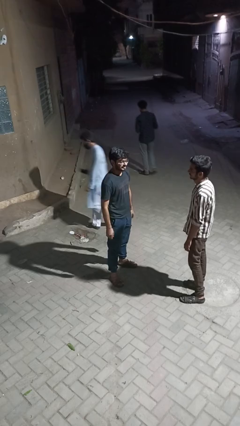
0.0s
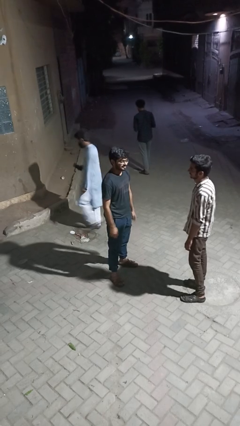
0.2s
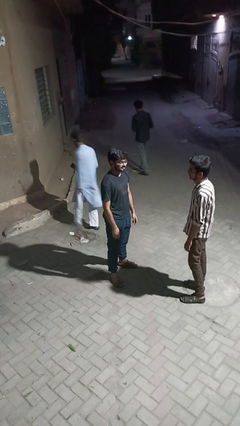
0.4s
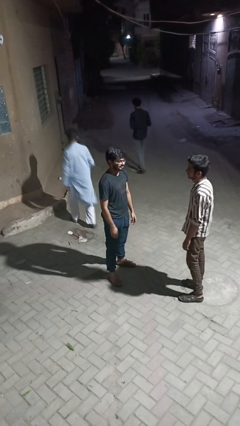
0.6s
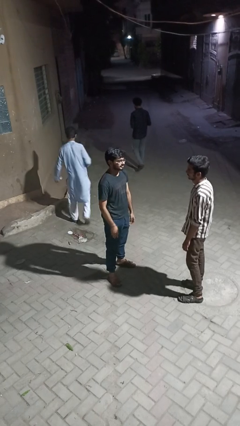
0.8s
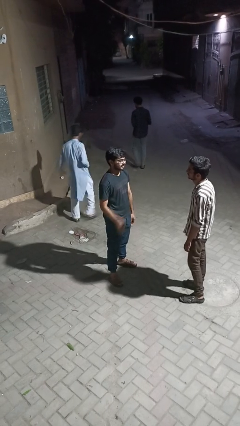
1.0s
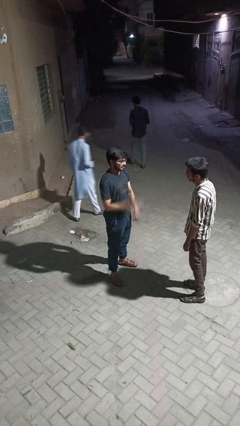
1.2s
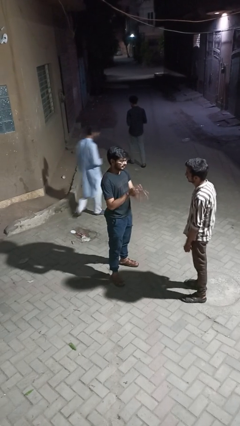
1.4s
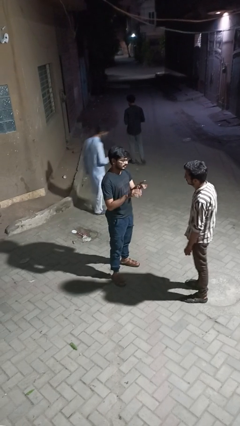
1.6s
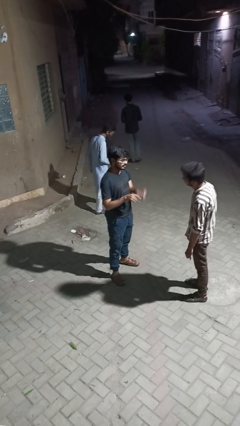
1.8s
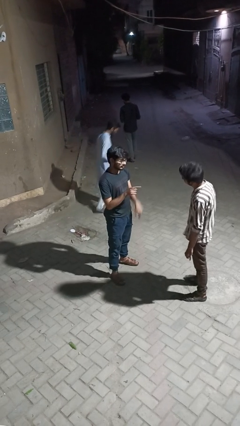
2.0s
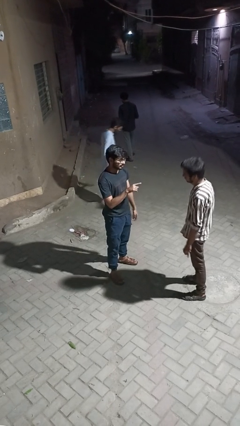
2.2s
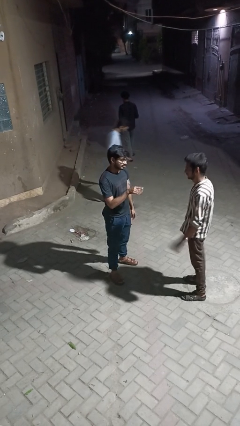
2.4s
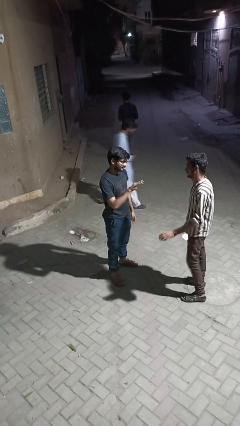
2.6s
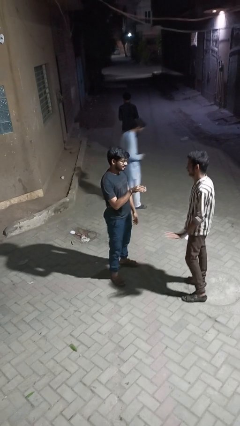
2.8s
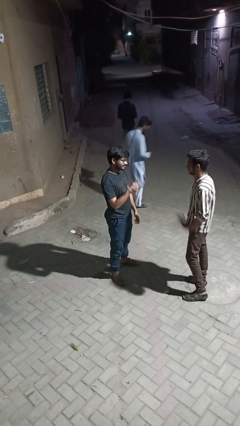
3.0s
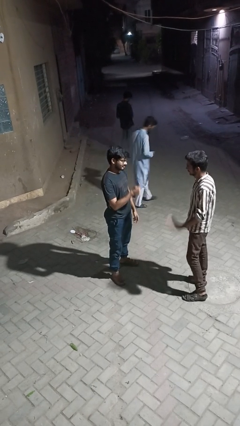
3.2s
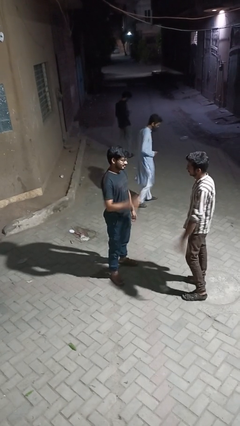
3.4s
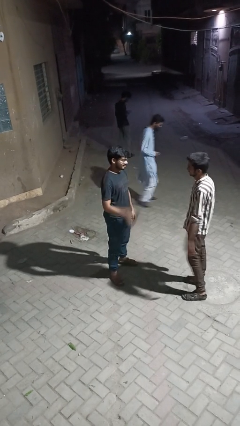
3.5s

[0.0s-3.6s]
person talks to person

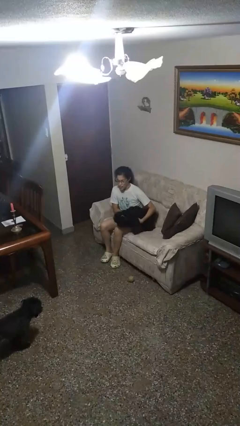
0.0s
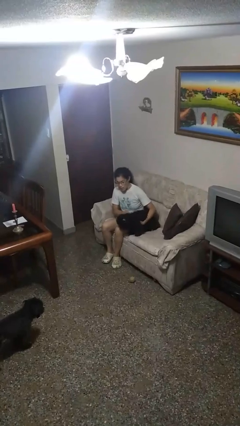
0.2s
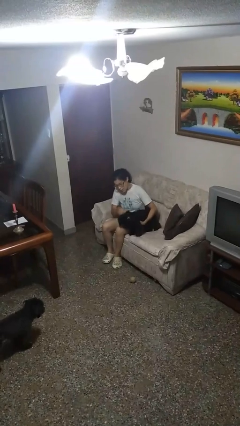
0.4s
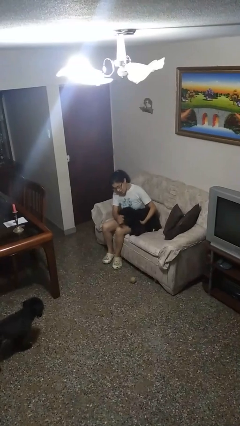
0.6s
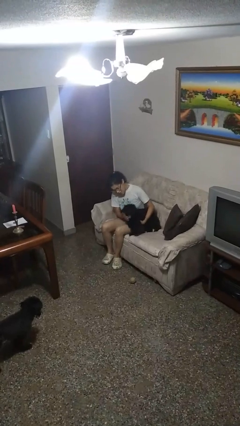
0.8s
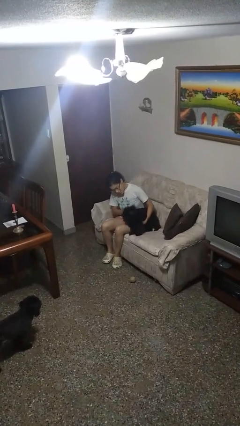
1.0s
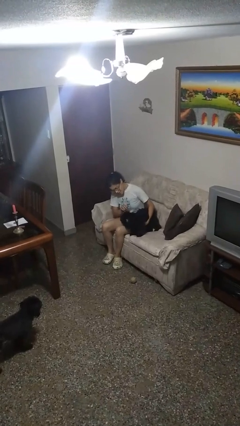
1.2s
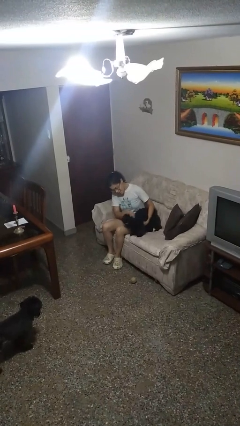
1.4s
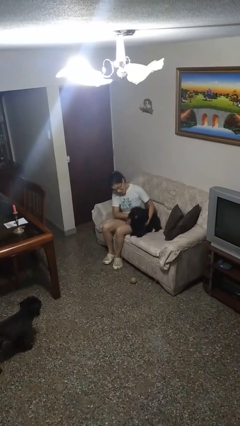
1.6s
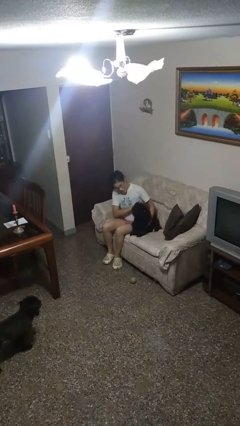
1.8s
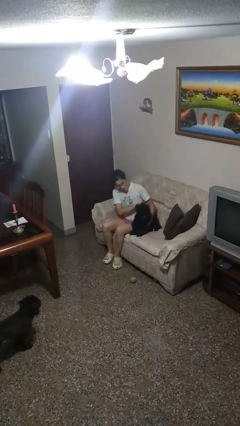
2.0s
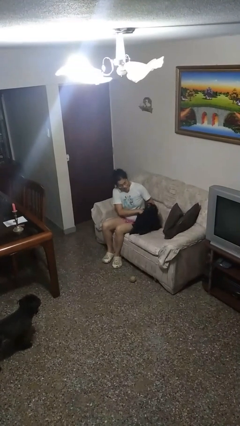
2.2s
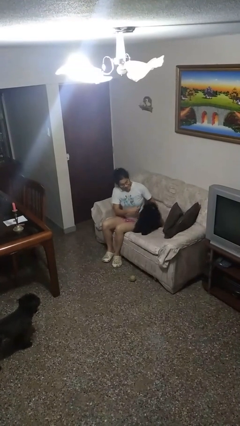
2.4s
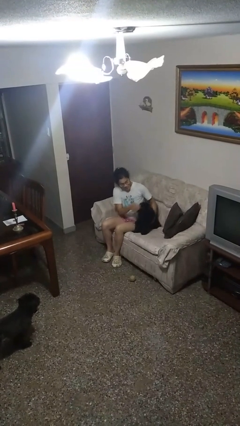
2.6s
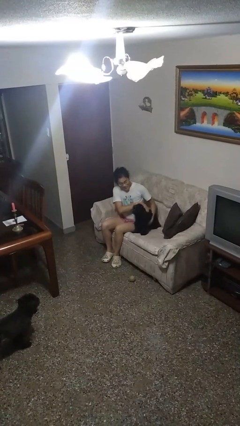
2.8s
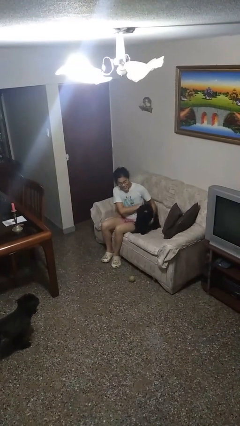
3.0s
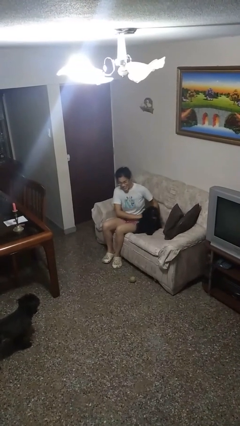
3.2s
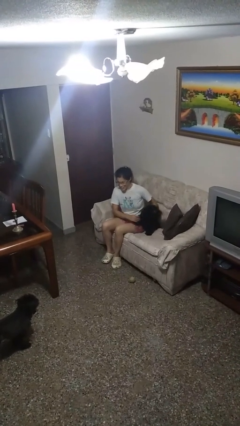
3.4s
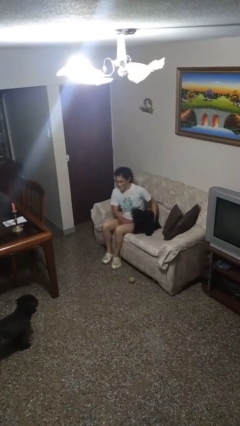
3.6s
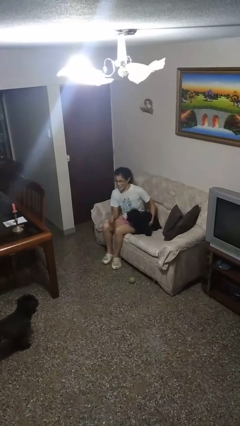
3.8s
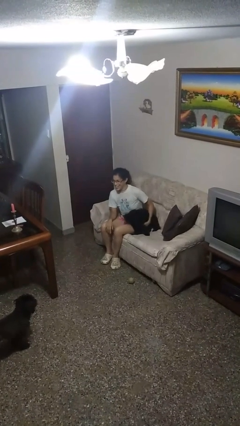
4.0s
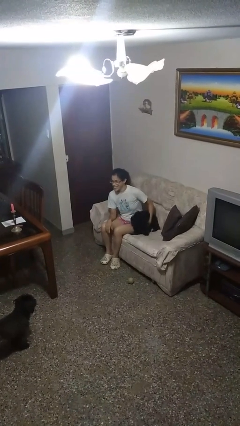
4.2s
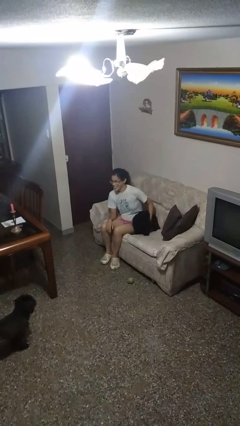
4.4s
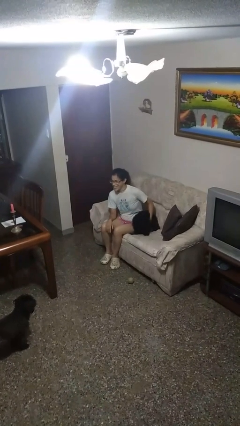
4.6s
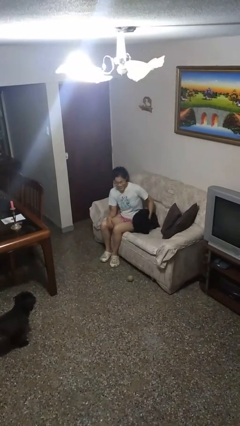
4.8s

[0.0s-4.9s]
person pets dog

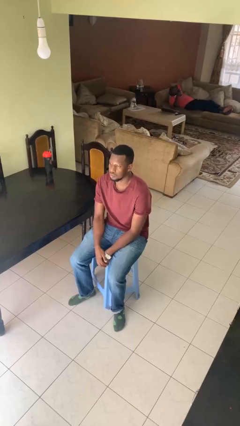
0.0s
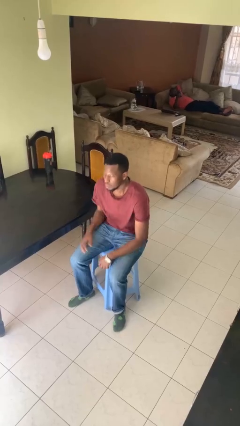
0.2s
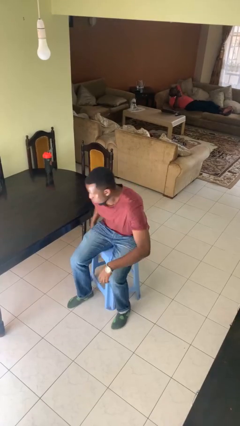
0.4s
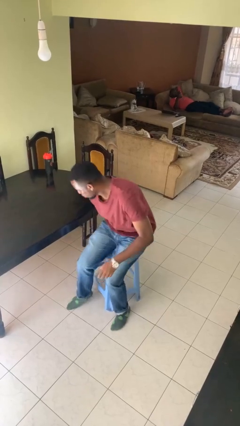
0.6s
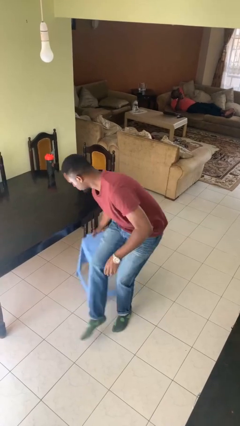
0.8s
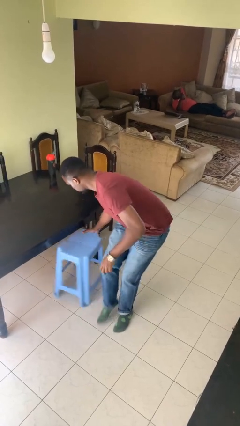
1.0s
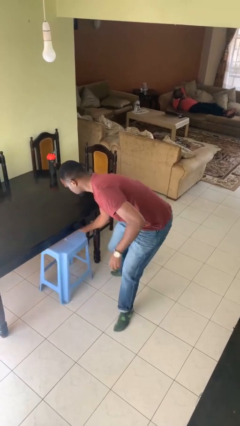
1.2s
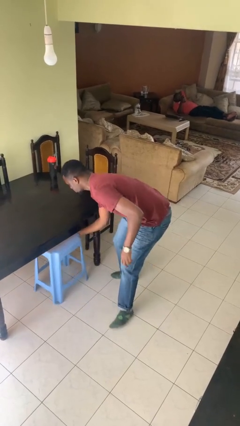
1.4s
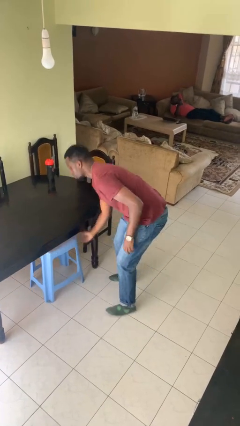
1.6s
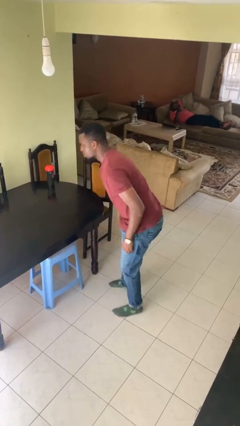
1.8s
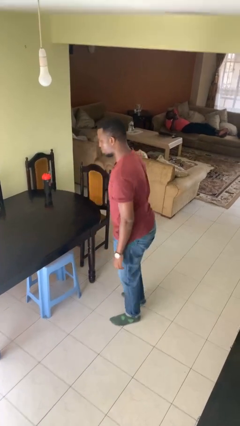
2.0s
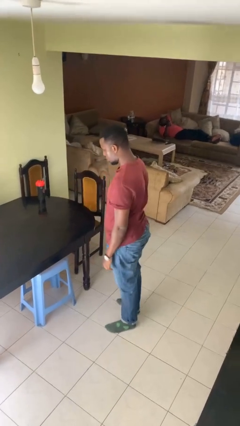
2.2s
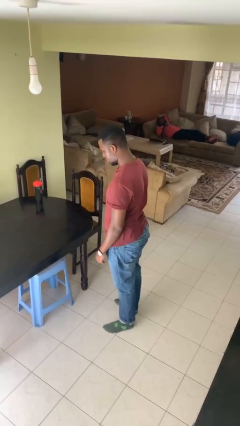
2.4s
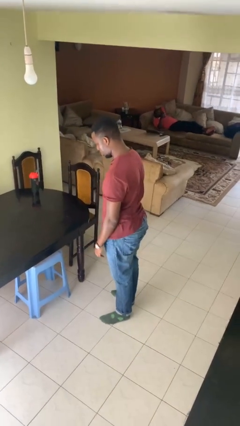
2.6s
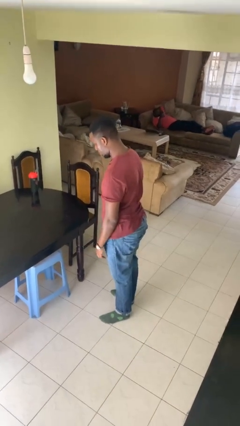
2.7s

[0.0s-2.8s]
person stands up

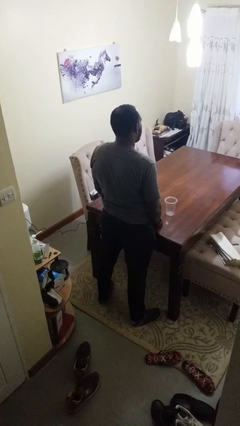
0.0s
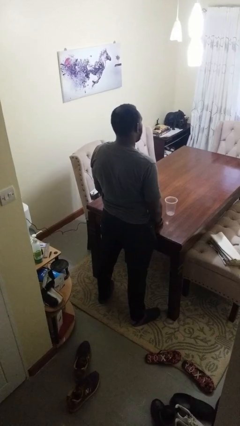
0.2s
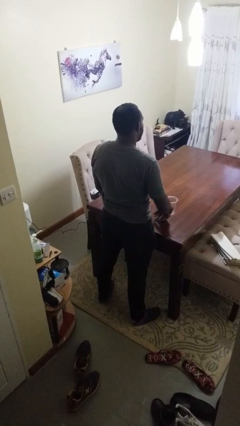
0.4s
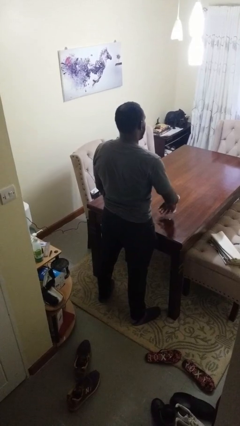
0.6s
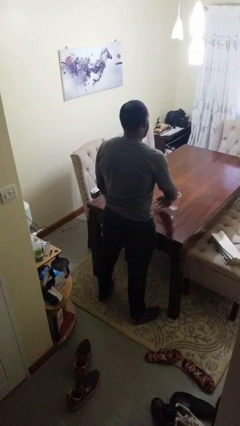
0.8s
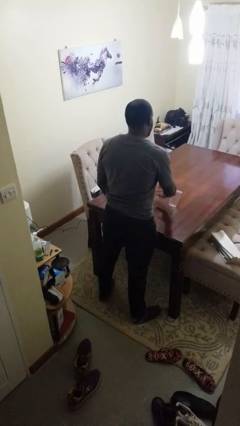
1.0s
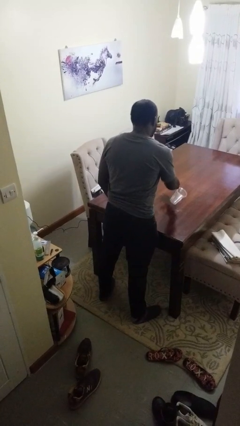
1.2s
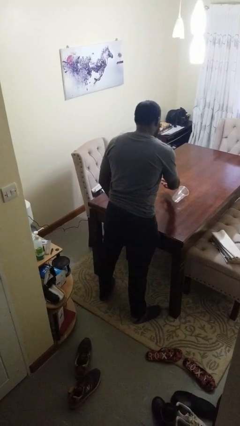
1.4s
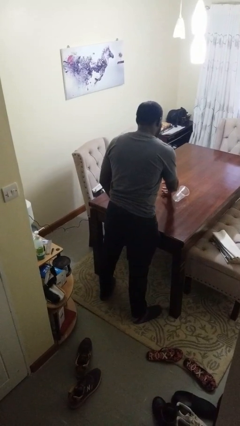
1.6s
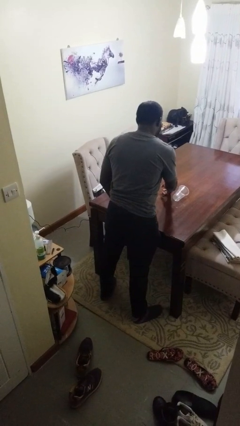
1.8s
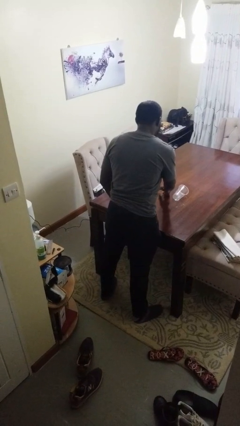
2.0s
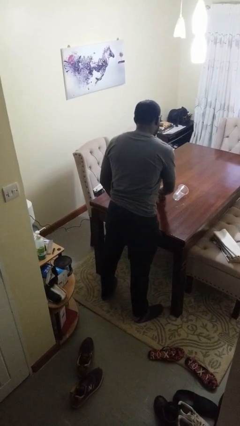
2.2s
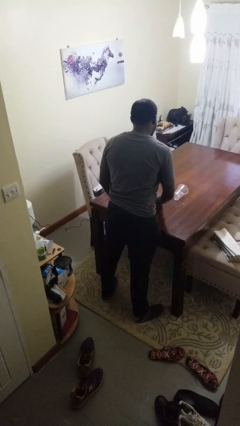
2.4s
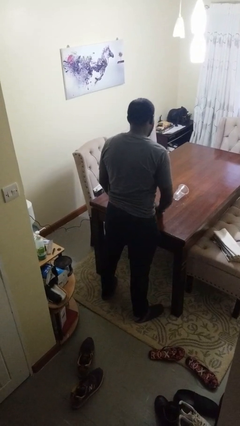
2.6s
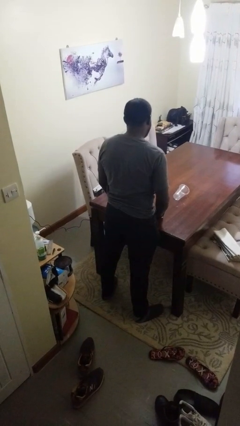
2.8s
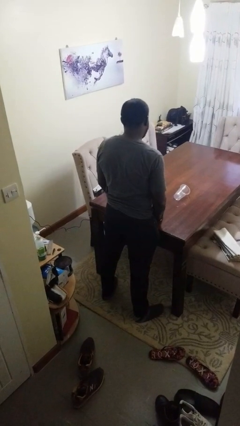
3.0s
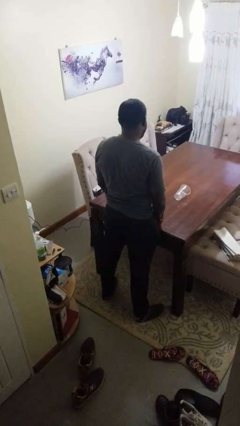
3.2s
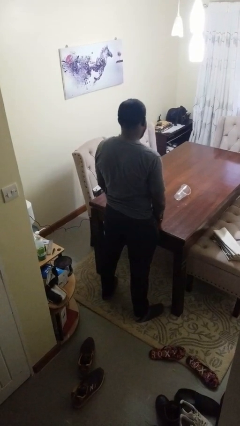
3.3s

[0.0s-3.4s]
person knocks over glass

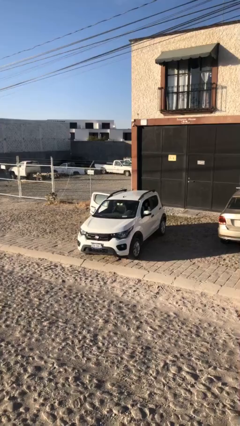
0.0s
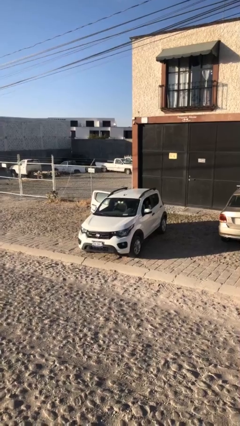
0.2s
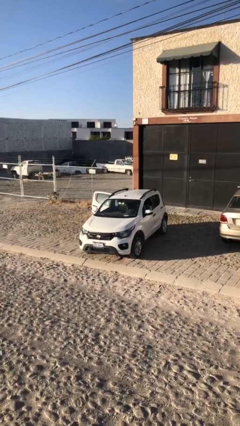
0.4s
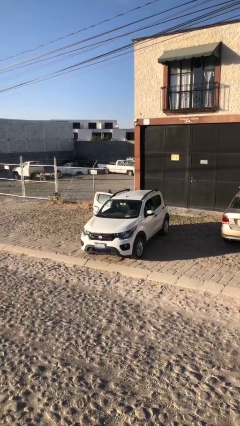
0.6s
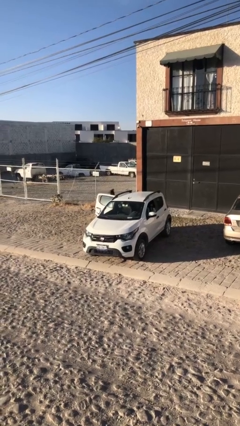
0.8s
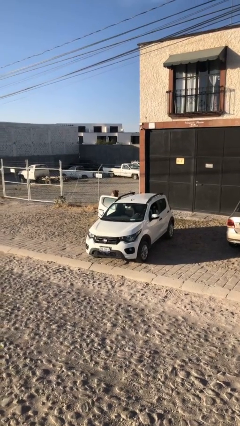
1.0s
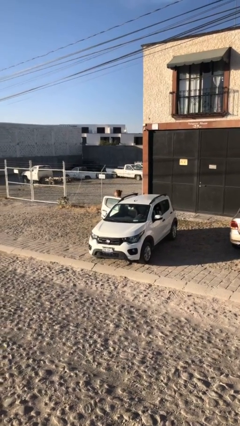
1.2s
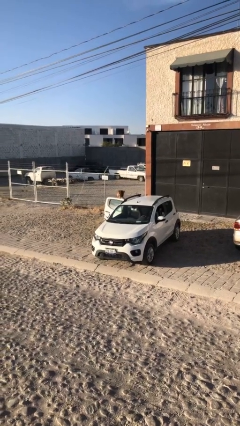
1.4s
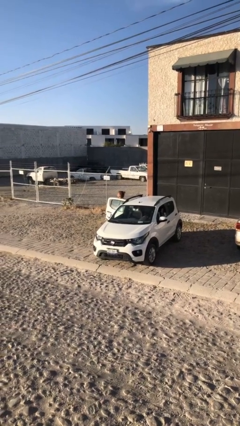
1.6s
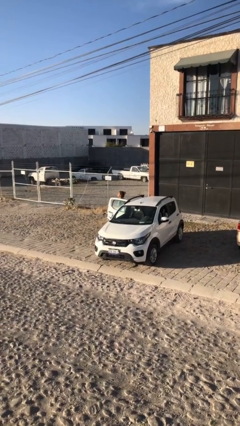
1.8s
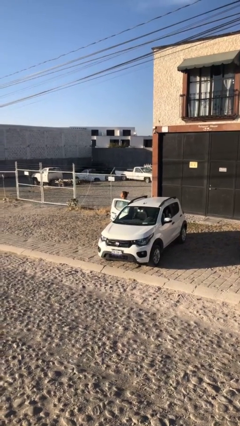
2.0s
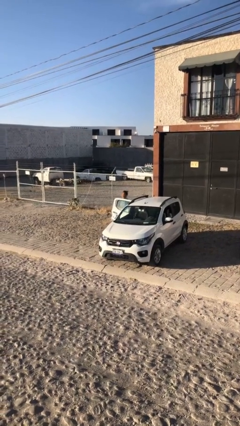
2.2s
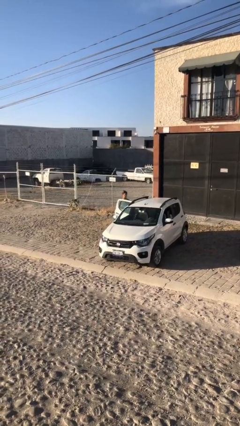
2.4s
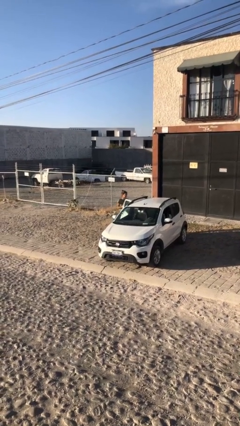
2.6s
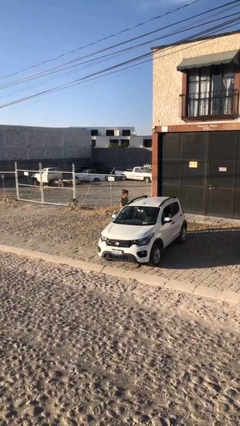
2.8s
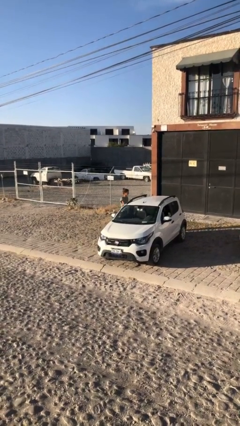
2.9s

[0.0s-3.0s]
person exits car
